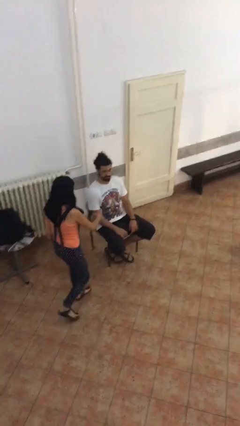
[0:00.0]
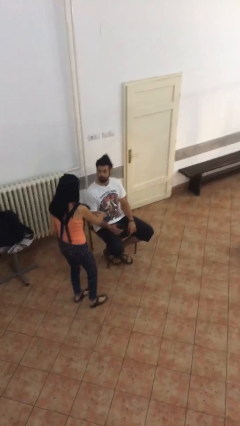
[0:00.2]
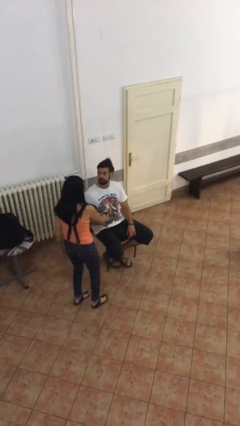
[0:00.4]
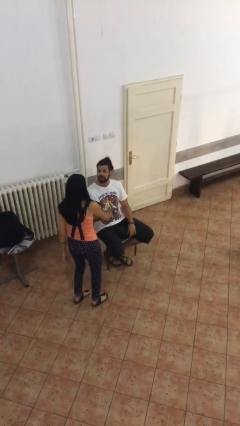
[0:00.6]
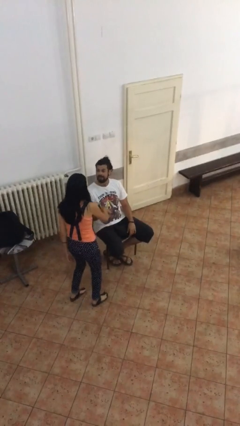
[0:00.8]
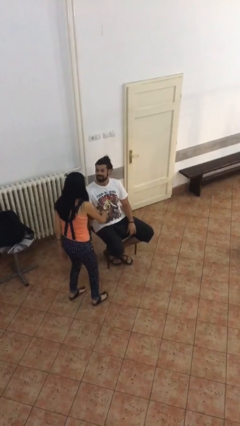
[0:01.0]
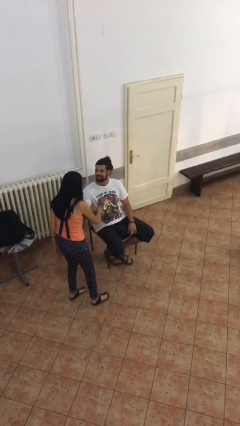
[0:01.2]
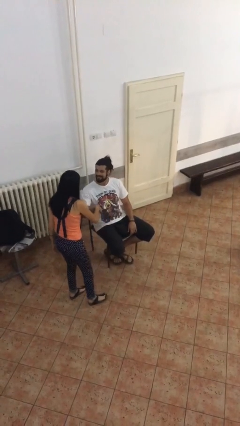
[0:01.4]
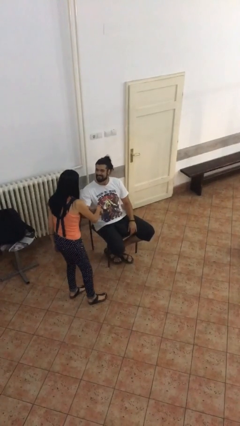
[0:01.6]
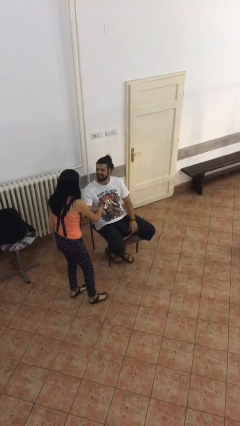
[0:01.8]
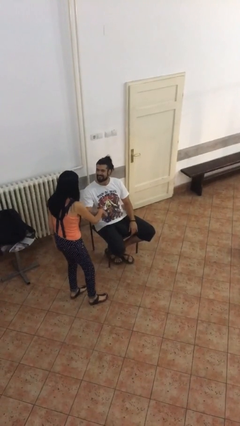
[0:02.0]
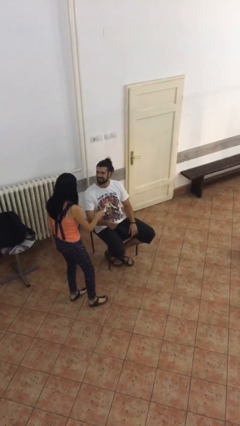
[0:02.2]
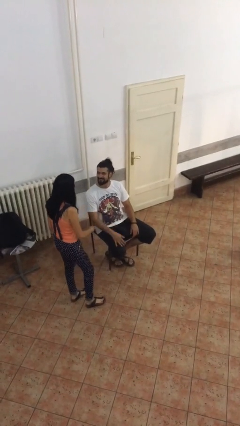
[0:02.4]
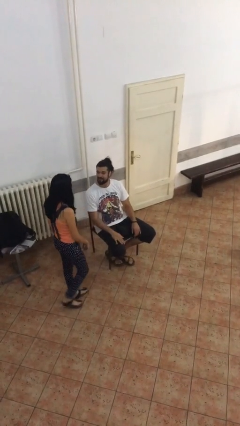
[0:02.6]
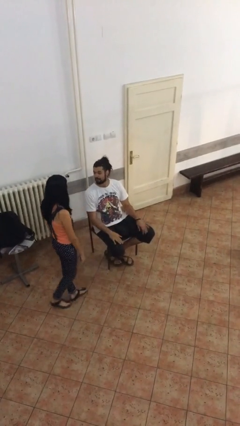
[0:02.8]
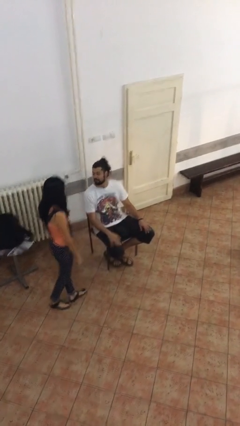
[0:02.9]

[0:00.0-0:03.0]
person shakes hand

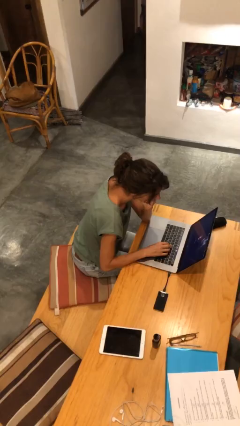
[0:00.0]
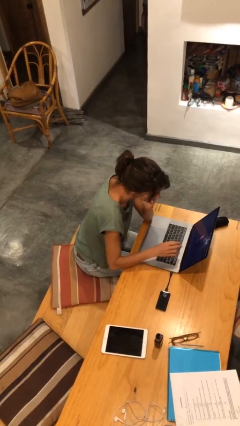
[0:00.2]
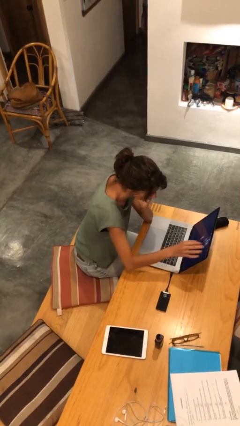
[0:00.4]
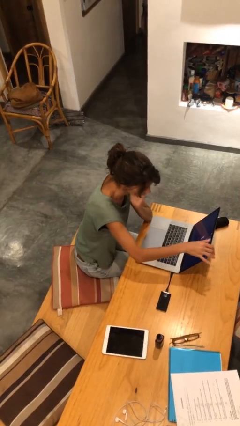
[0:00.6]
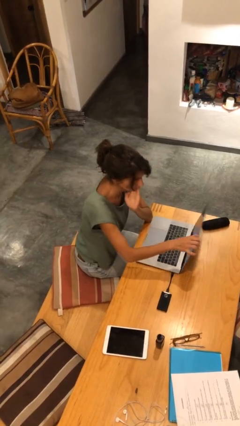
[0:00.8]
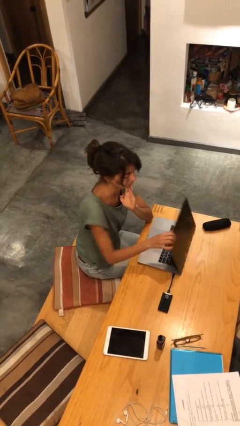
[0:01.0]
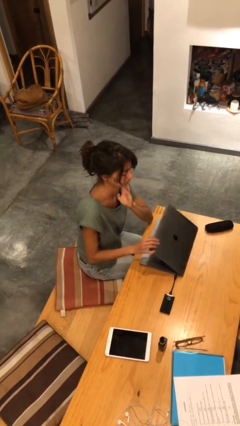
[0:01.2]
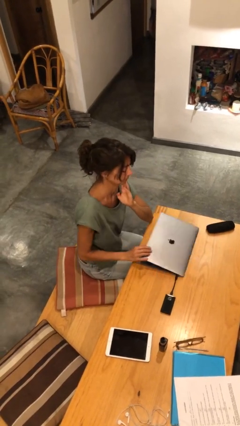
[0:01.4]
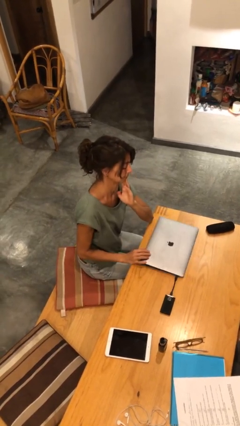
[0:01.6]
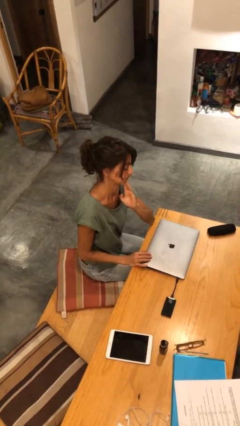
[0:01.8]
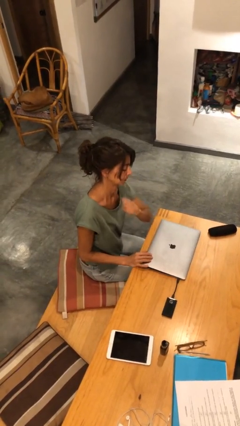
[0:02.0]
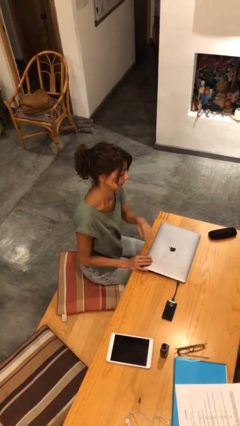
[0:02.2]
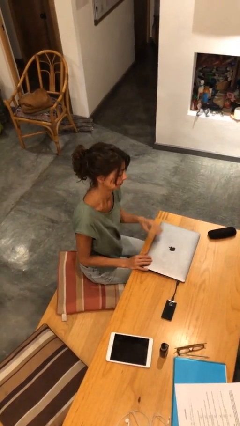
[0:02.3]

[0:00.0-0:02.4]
person closes laptop

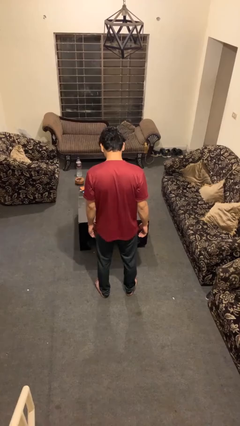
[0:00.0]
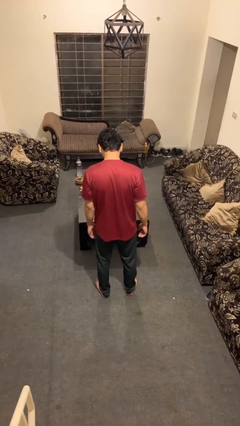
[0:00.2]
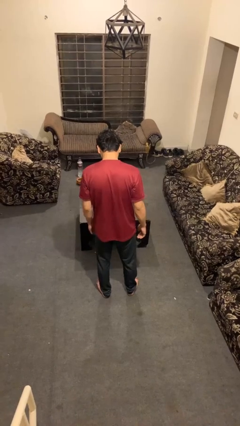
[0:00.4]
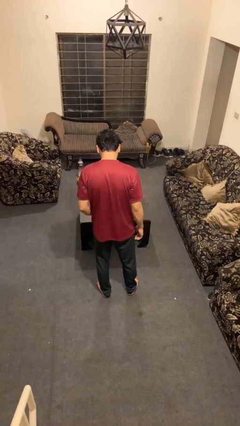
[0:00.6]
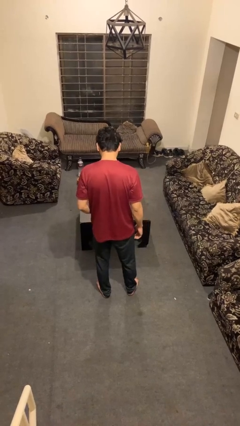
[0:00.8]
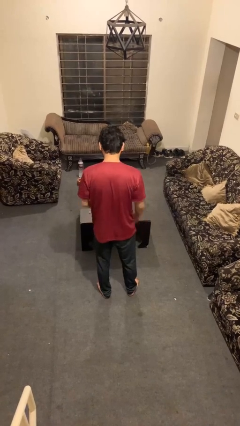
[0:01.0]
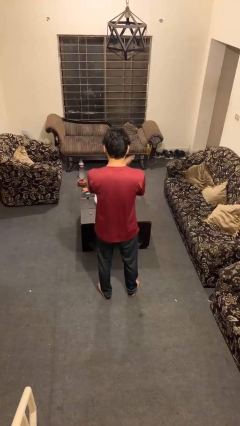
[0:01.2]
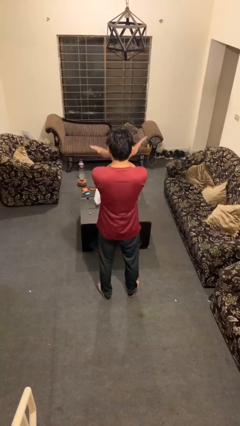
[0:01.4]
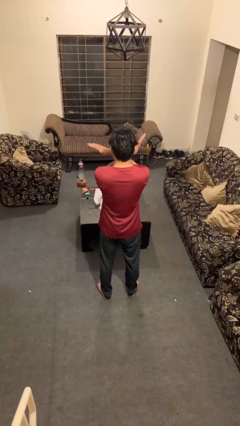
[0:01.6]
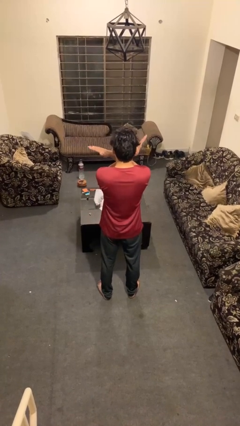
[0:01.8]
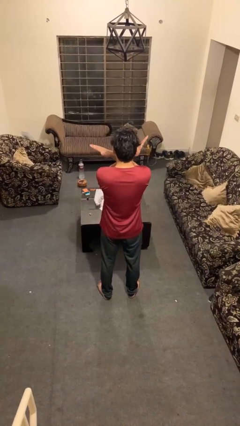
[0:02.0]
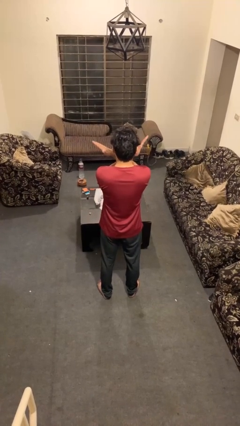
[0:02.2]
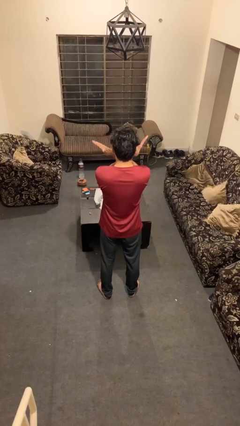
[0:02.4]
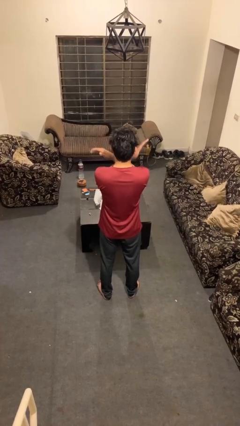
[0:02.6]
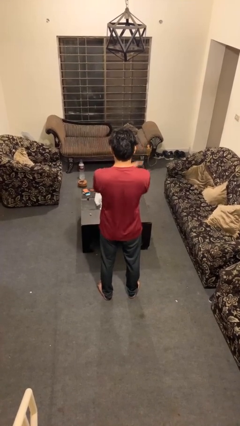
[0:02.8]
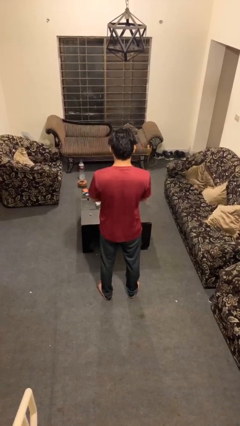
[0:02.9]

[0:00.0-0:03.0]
person gestures arms x

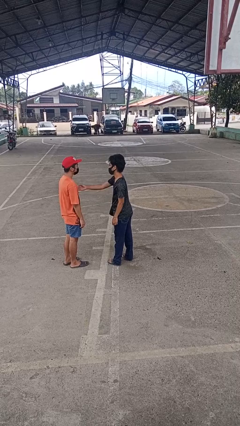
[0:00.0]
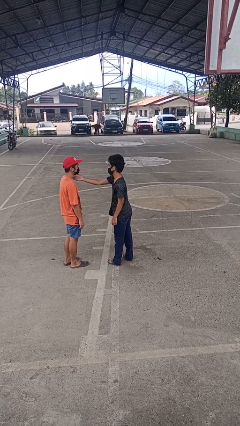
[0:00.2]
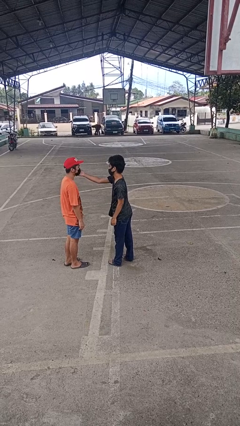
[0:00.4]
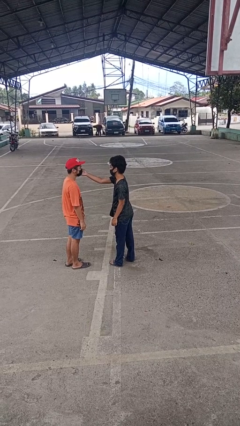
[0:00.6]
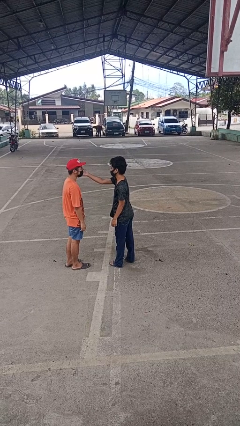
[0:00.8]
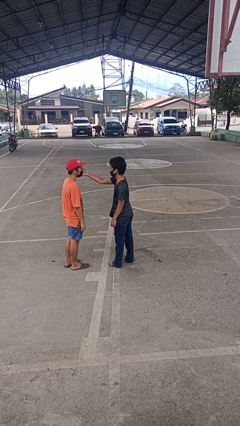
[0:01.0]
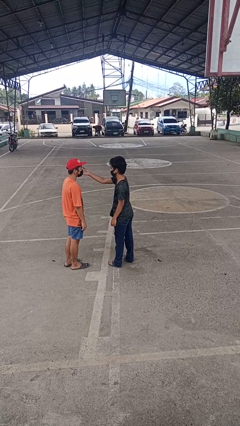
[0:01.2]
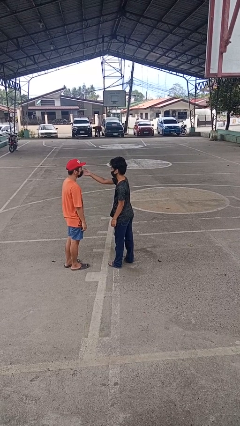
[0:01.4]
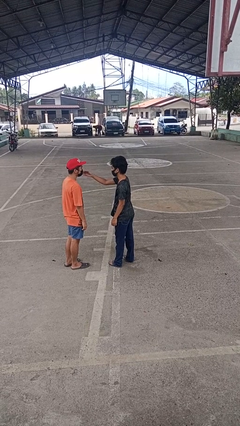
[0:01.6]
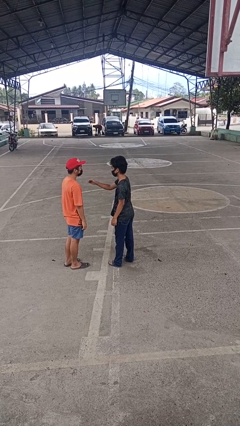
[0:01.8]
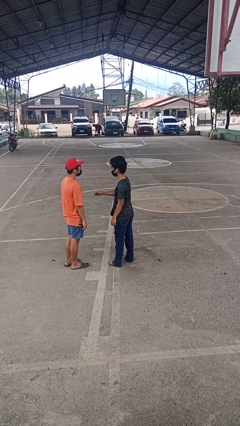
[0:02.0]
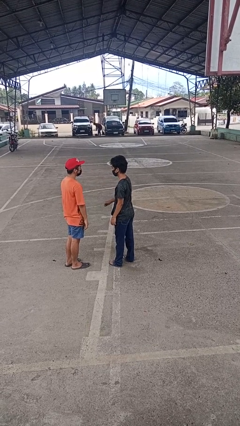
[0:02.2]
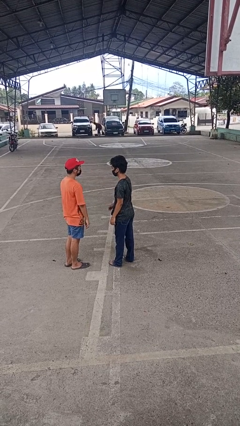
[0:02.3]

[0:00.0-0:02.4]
person touches face of person

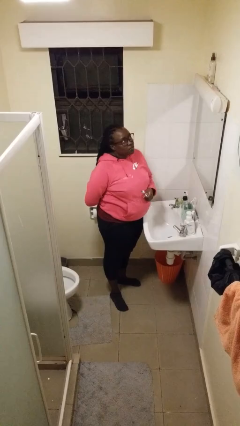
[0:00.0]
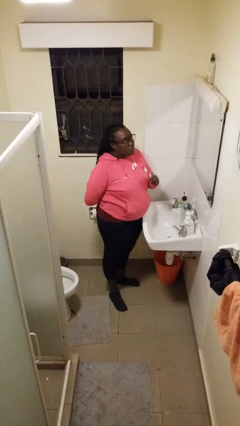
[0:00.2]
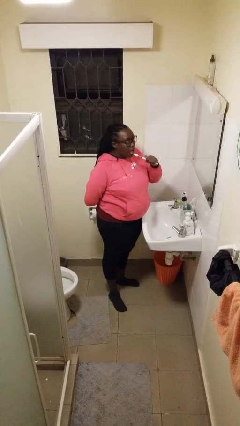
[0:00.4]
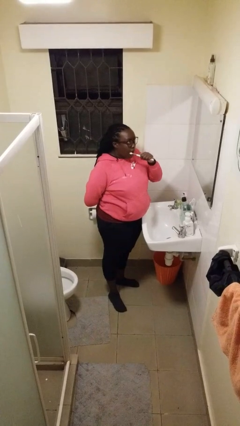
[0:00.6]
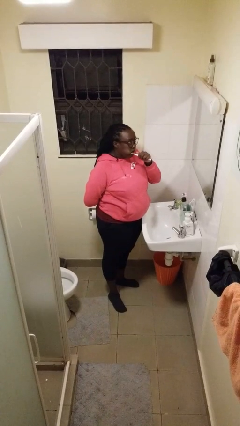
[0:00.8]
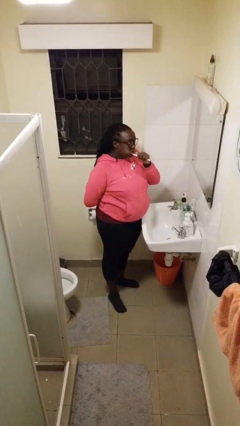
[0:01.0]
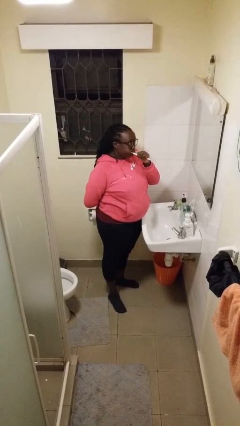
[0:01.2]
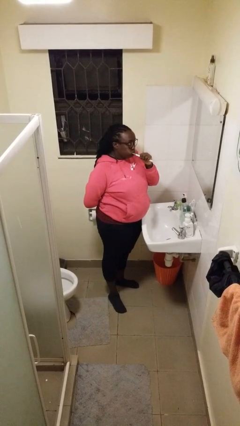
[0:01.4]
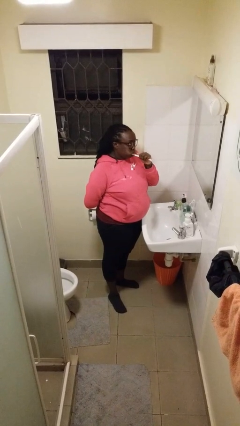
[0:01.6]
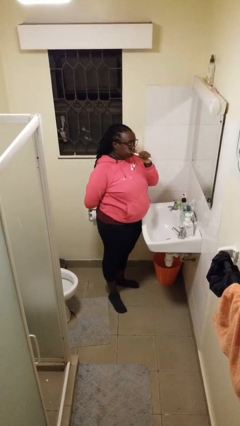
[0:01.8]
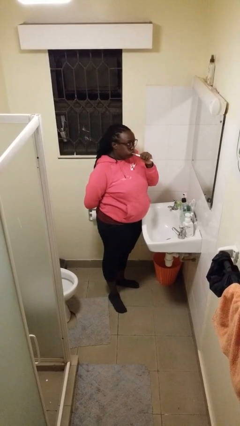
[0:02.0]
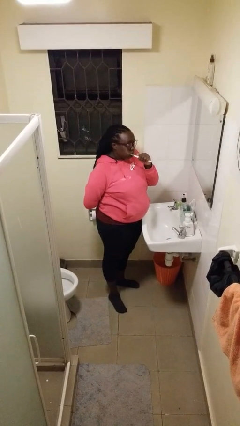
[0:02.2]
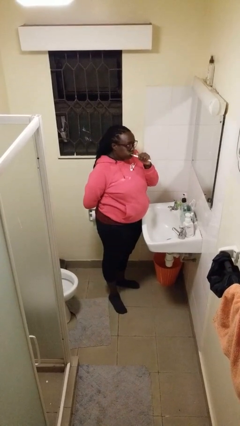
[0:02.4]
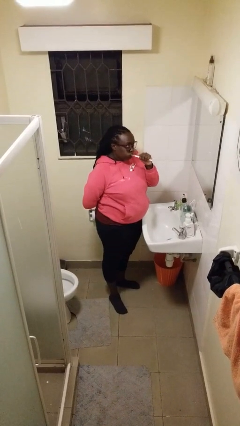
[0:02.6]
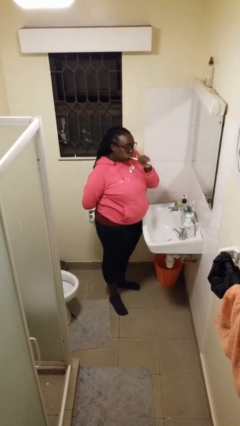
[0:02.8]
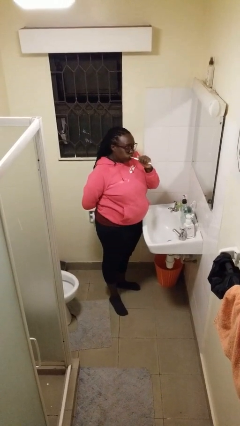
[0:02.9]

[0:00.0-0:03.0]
person brushes teeth

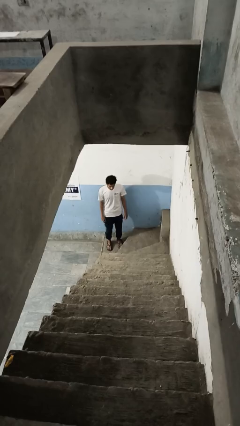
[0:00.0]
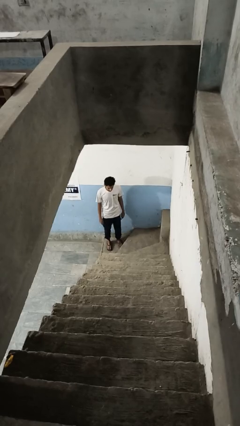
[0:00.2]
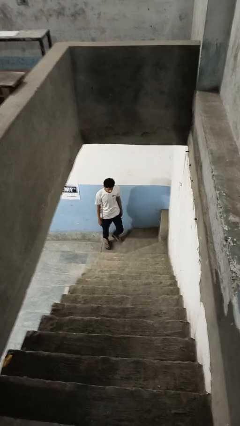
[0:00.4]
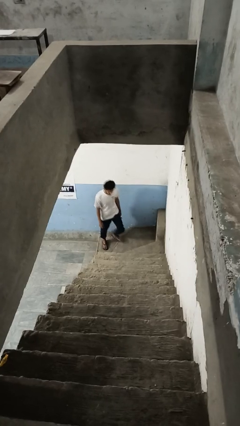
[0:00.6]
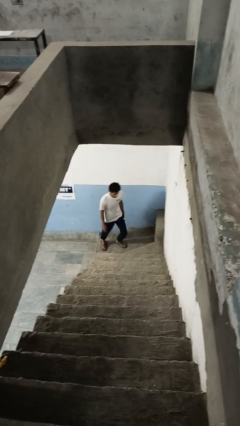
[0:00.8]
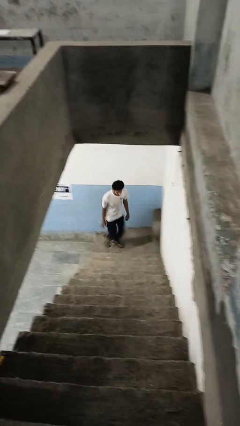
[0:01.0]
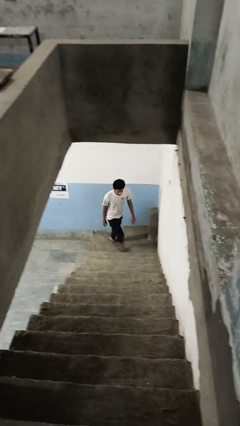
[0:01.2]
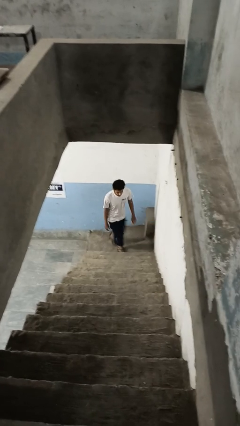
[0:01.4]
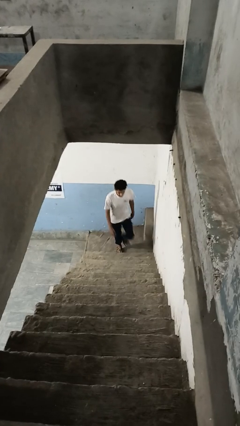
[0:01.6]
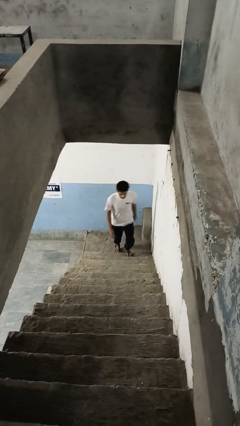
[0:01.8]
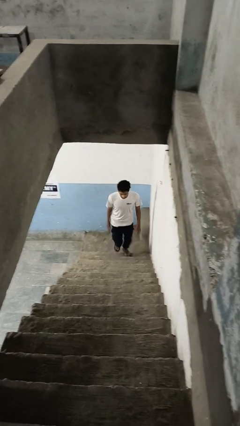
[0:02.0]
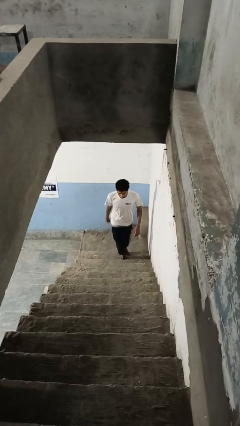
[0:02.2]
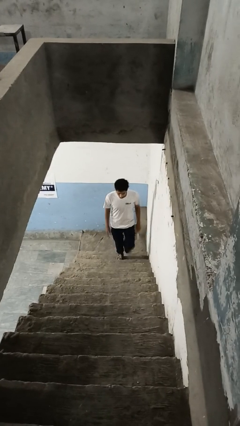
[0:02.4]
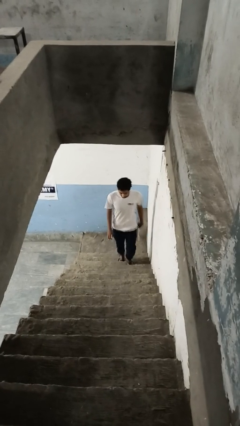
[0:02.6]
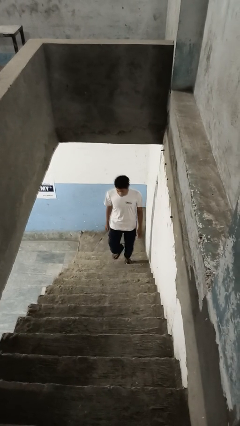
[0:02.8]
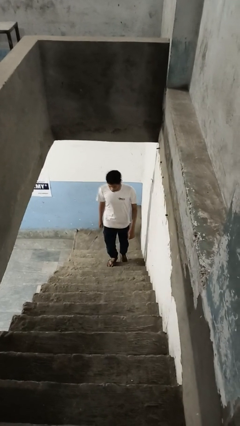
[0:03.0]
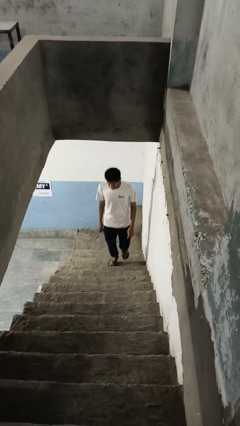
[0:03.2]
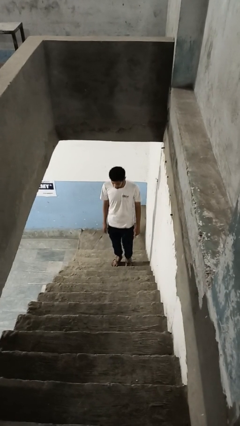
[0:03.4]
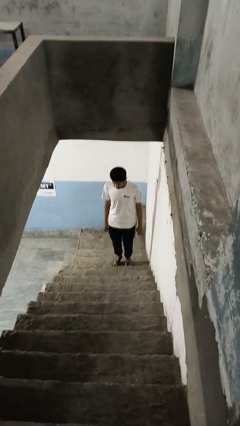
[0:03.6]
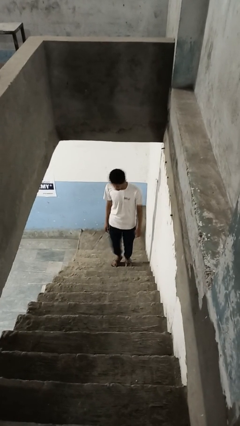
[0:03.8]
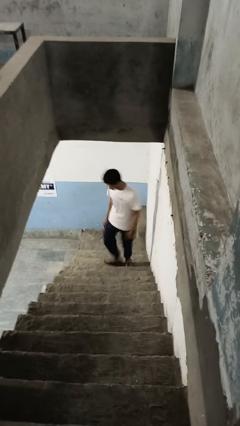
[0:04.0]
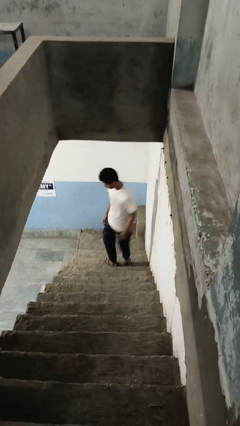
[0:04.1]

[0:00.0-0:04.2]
person climbs up stairs
